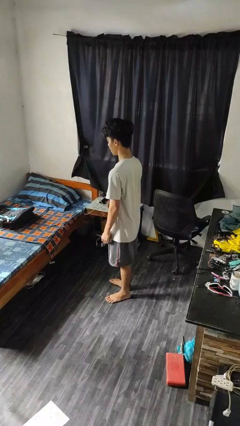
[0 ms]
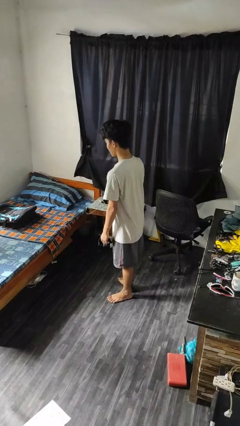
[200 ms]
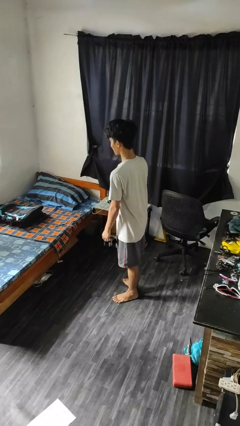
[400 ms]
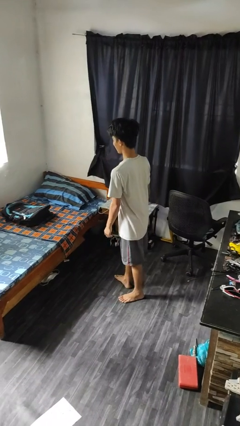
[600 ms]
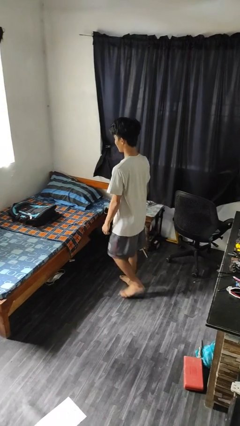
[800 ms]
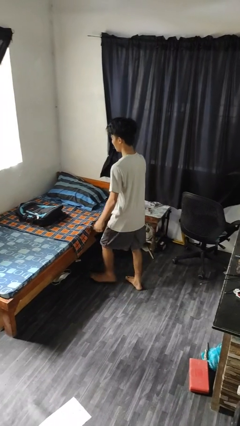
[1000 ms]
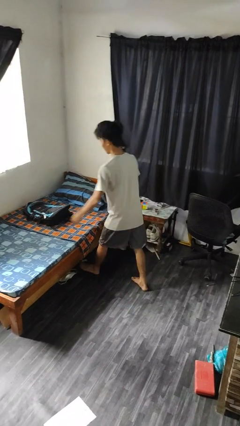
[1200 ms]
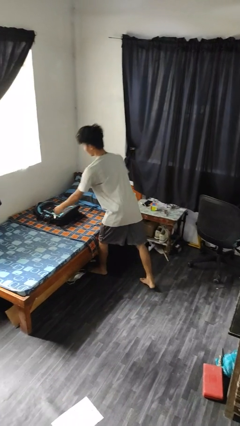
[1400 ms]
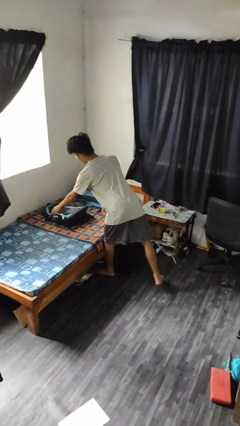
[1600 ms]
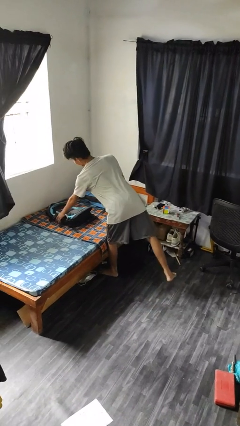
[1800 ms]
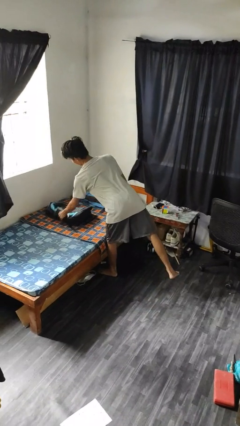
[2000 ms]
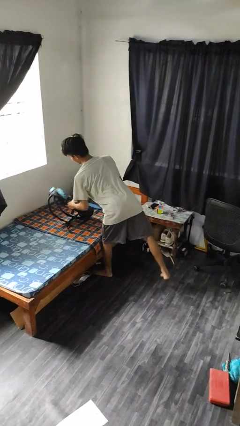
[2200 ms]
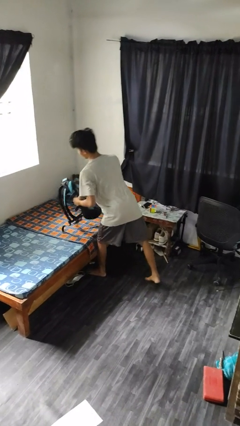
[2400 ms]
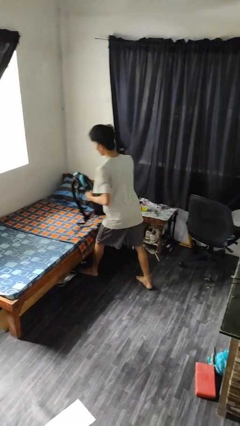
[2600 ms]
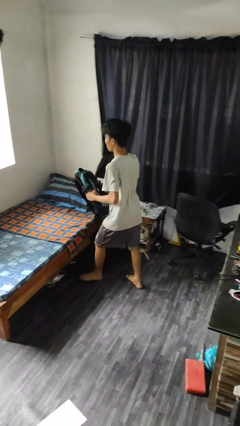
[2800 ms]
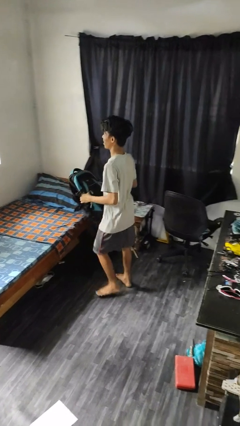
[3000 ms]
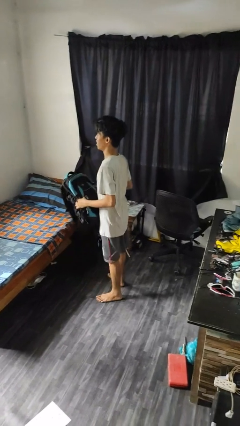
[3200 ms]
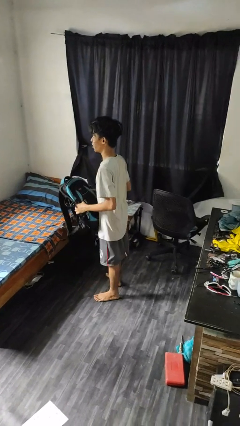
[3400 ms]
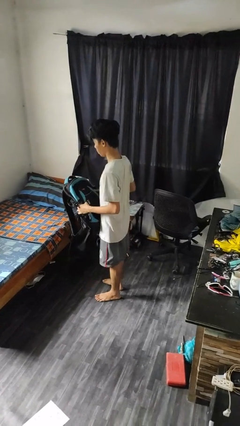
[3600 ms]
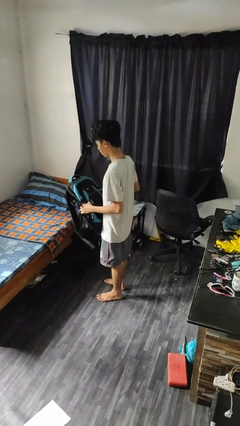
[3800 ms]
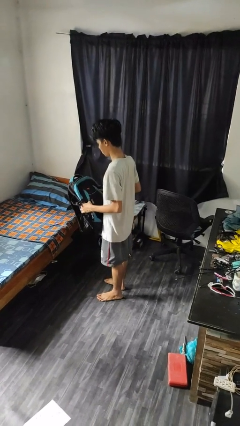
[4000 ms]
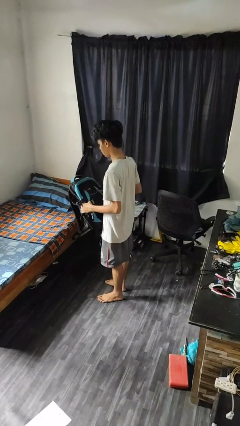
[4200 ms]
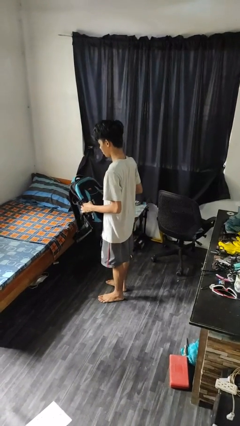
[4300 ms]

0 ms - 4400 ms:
person picks up object from bed

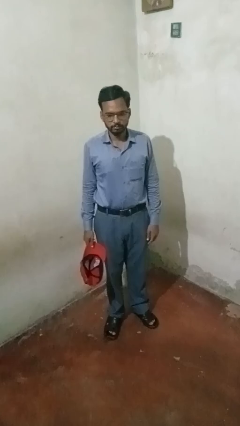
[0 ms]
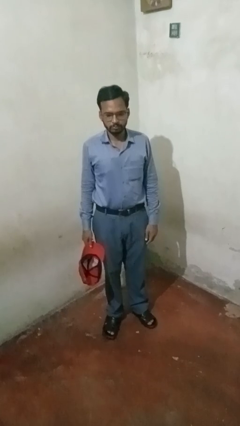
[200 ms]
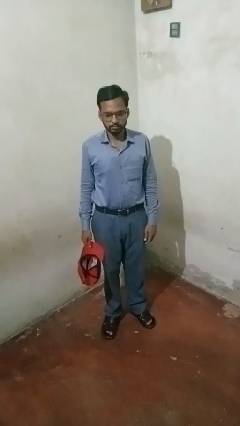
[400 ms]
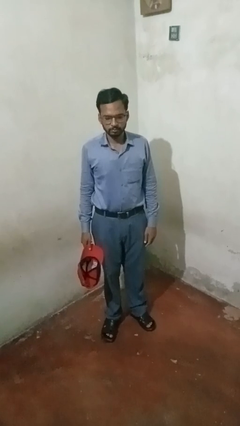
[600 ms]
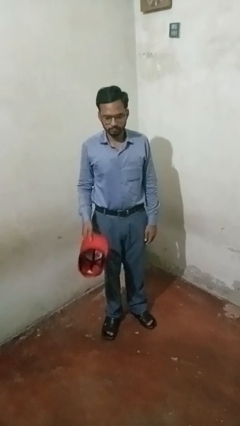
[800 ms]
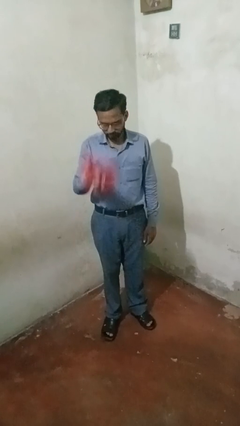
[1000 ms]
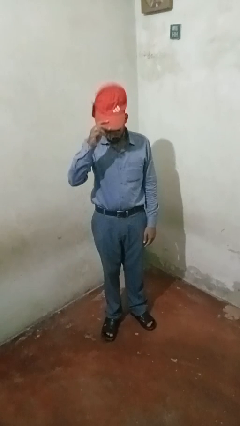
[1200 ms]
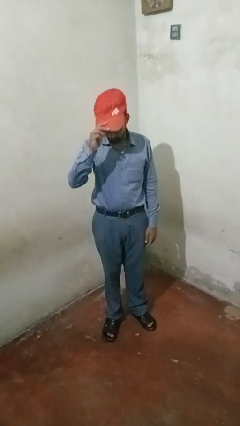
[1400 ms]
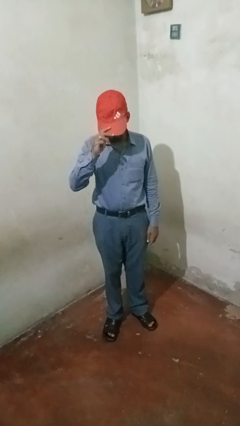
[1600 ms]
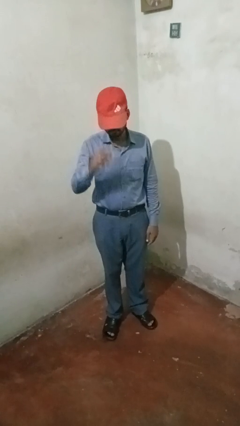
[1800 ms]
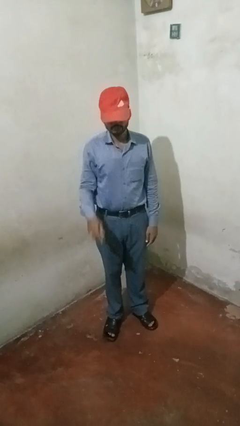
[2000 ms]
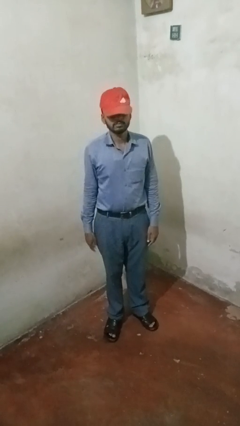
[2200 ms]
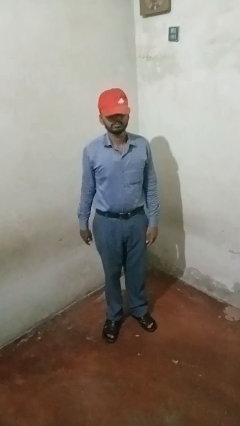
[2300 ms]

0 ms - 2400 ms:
person puts on hat

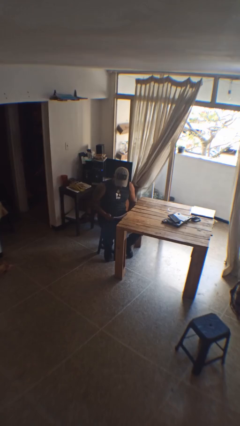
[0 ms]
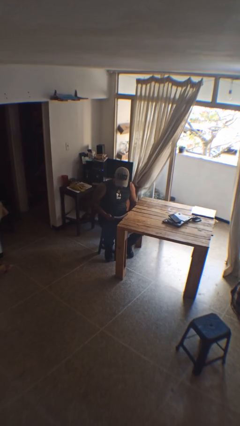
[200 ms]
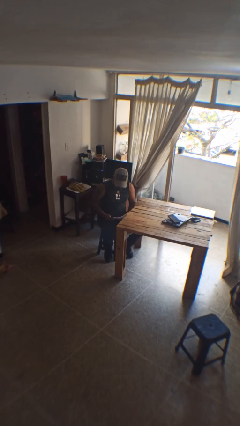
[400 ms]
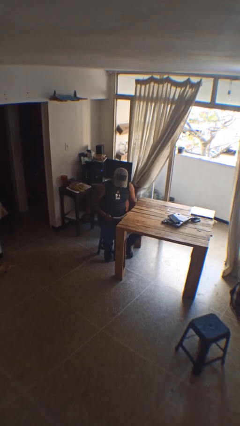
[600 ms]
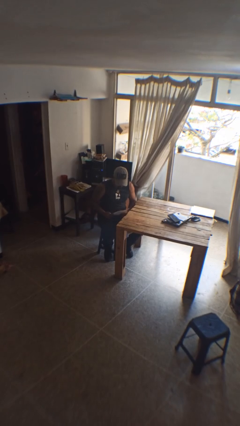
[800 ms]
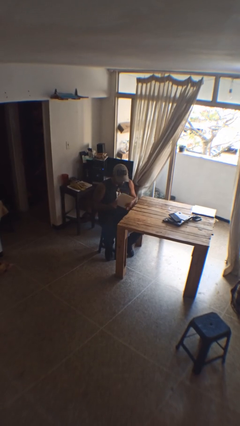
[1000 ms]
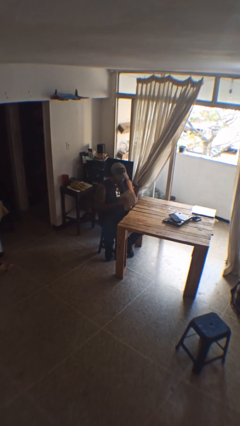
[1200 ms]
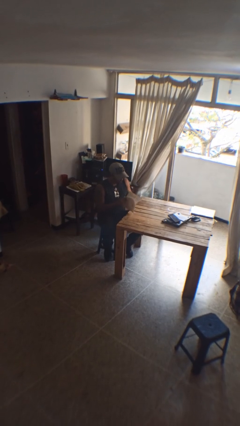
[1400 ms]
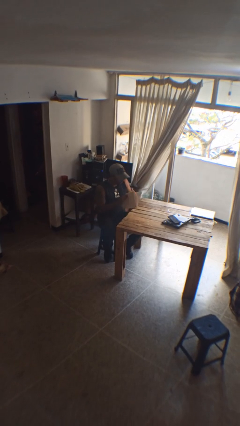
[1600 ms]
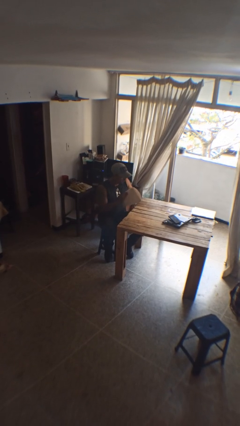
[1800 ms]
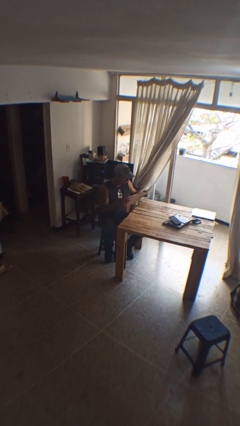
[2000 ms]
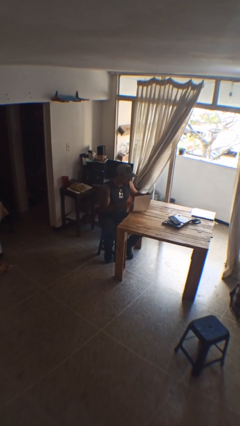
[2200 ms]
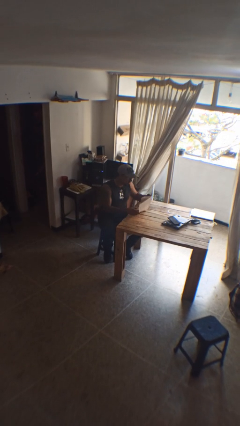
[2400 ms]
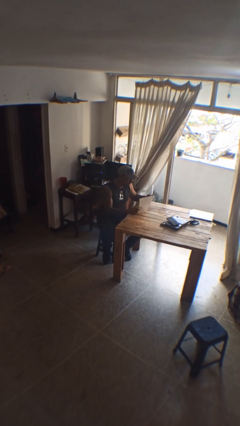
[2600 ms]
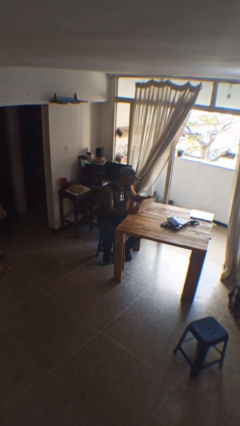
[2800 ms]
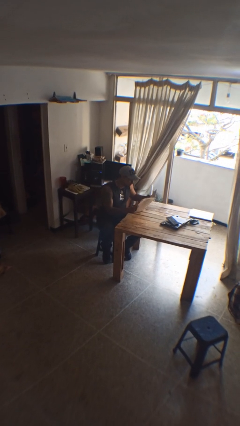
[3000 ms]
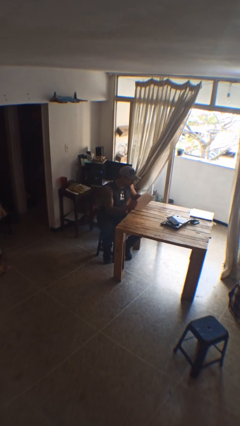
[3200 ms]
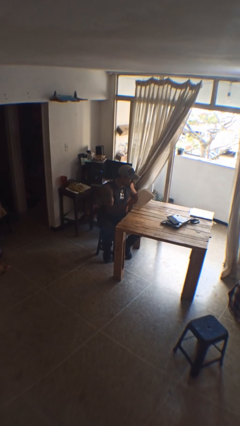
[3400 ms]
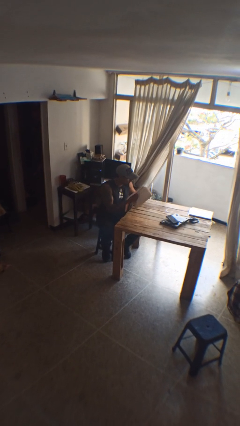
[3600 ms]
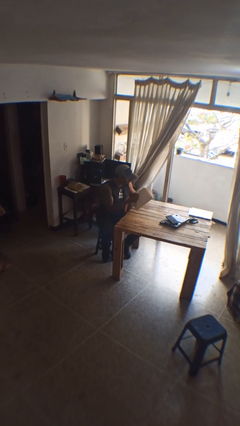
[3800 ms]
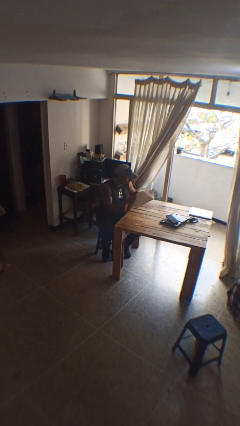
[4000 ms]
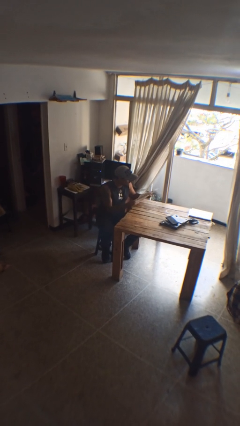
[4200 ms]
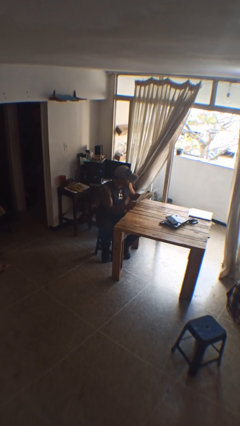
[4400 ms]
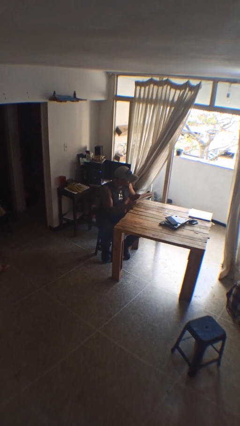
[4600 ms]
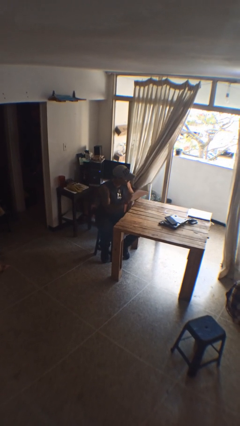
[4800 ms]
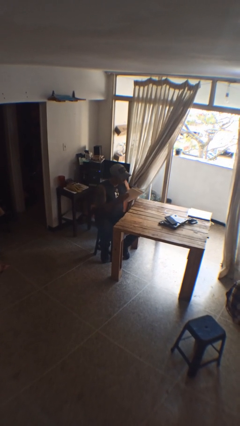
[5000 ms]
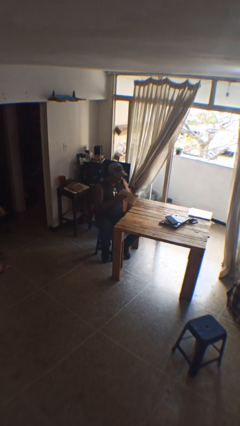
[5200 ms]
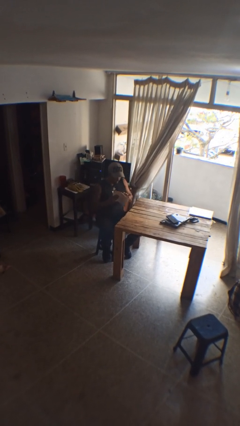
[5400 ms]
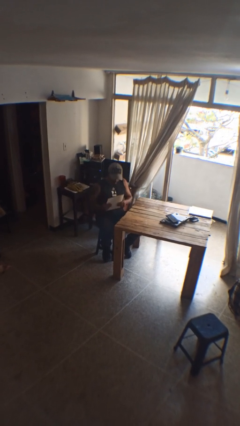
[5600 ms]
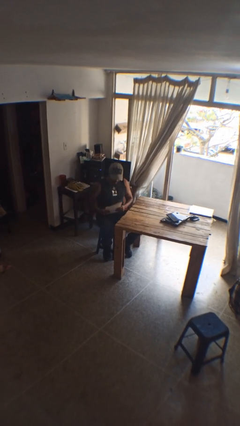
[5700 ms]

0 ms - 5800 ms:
person reads document

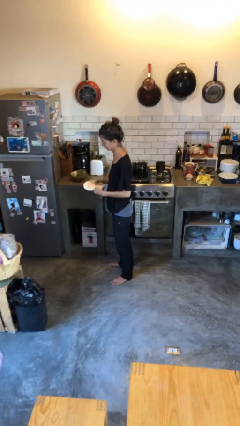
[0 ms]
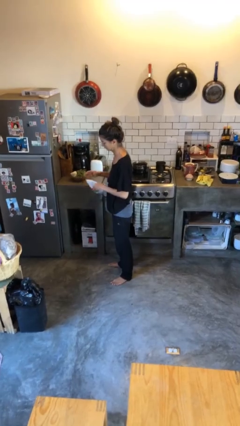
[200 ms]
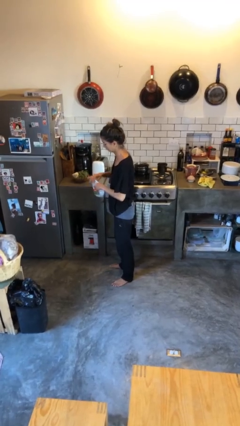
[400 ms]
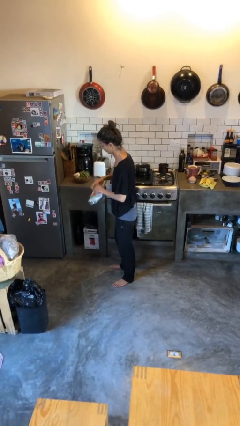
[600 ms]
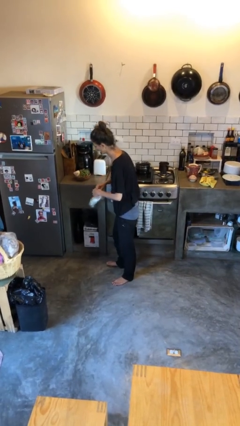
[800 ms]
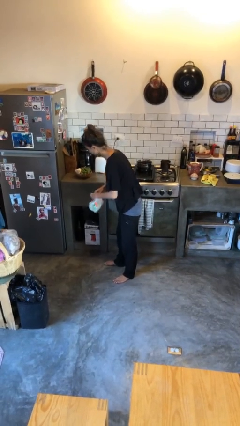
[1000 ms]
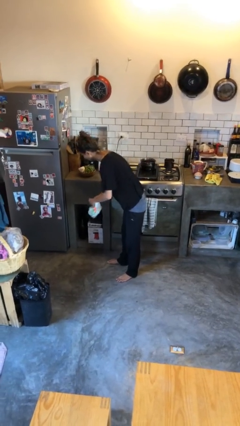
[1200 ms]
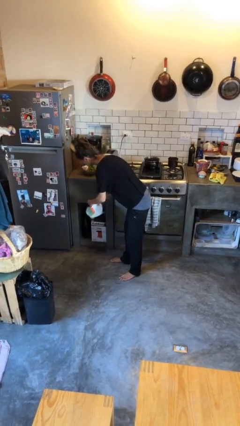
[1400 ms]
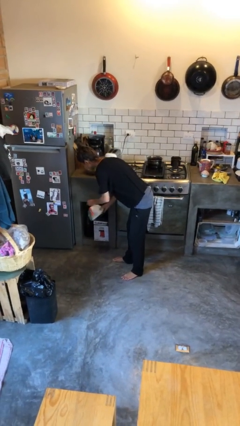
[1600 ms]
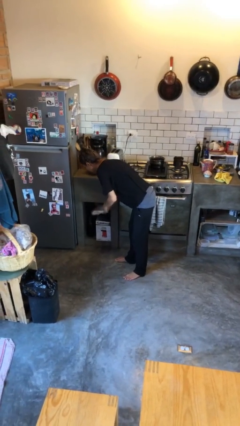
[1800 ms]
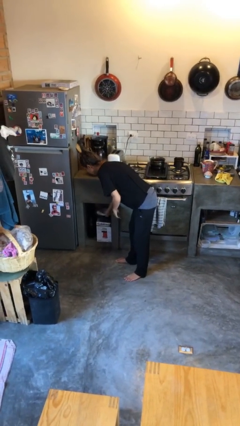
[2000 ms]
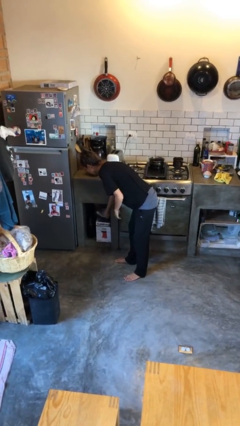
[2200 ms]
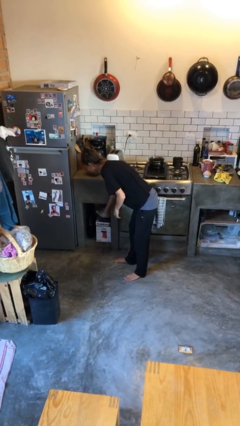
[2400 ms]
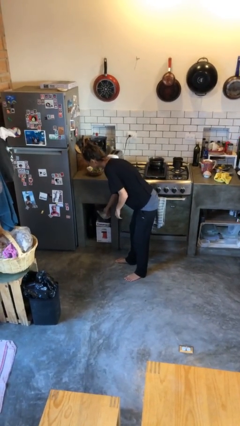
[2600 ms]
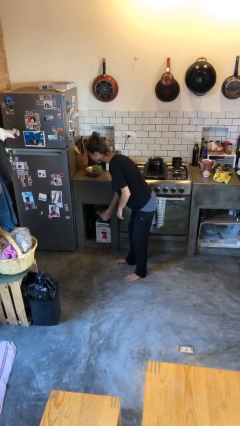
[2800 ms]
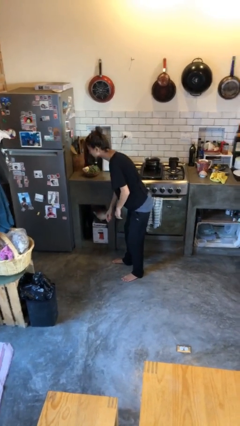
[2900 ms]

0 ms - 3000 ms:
person puts down object into cabinet

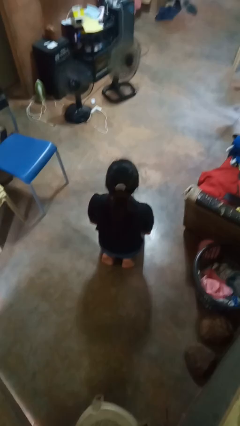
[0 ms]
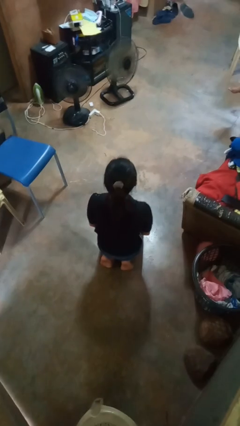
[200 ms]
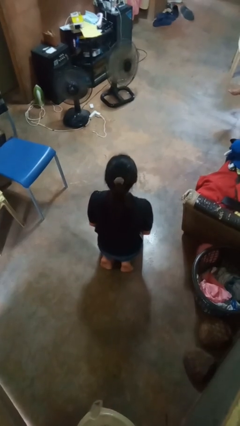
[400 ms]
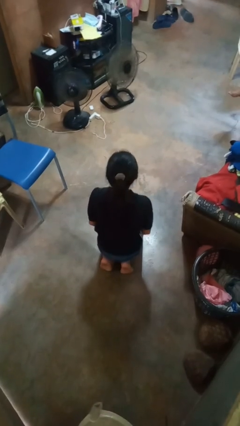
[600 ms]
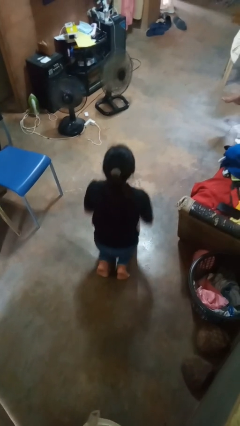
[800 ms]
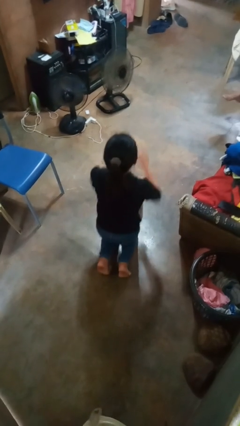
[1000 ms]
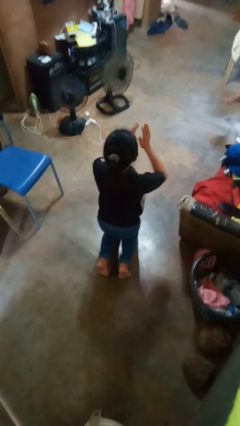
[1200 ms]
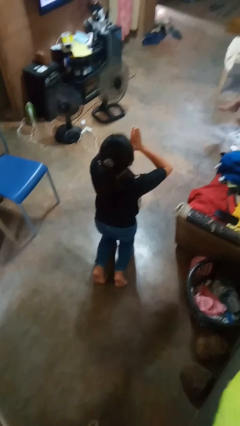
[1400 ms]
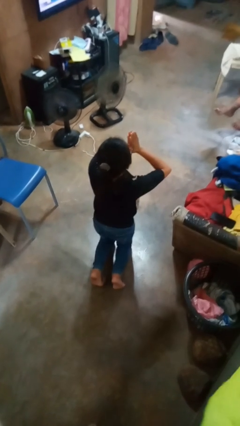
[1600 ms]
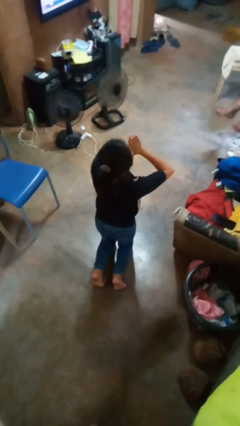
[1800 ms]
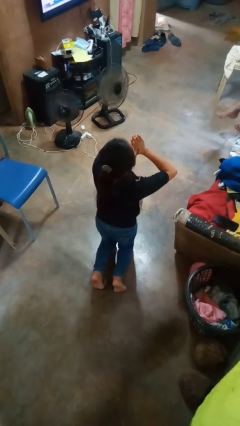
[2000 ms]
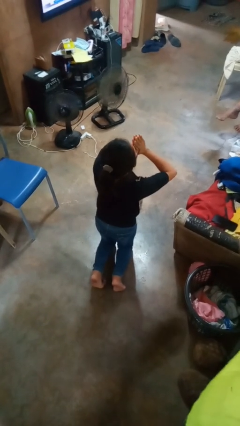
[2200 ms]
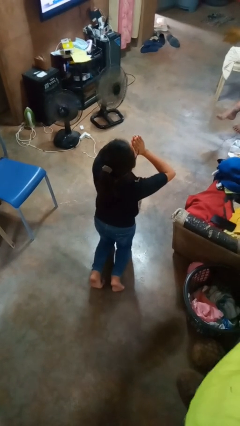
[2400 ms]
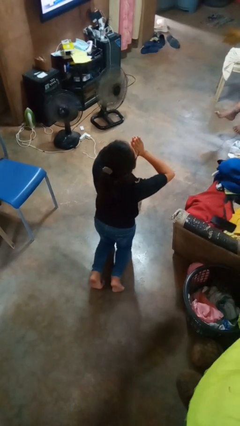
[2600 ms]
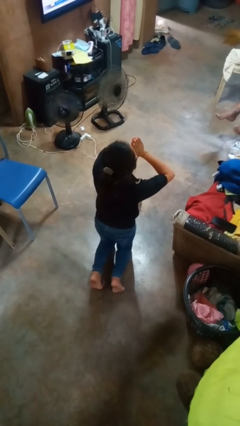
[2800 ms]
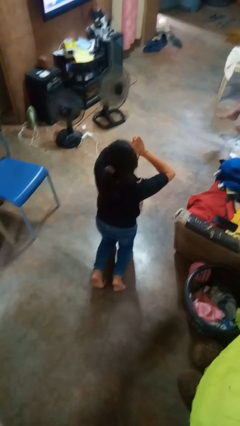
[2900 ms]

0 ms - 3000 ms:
person prays
